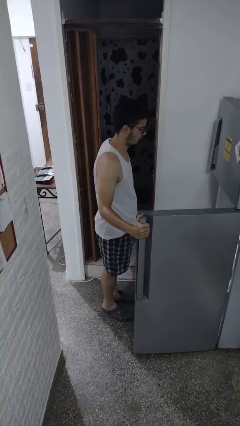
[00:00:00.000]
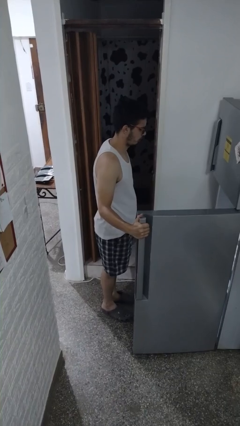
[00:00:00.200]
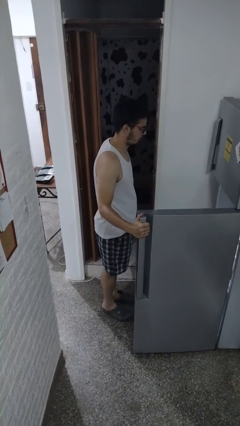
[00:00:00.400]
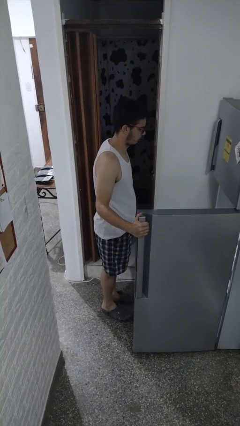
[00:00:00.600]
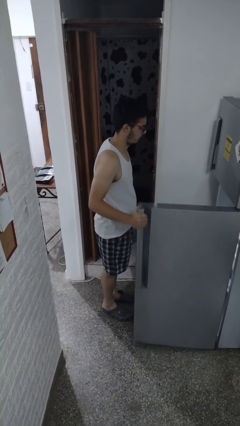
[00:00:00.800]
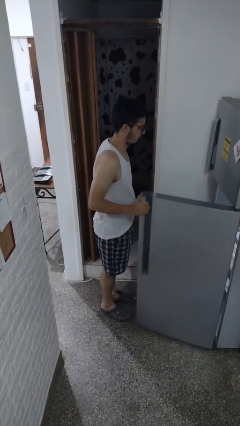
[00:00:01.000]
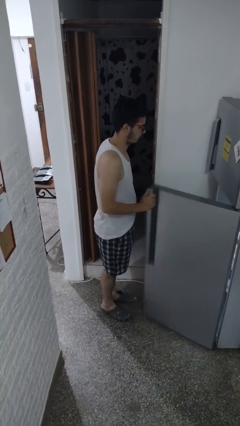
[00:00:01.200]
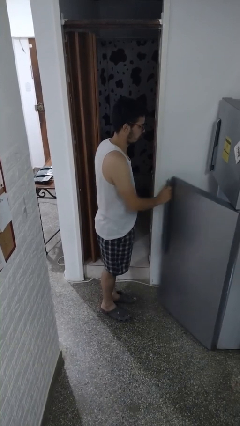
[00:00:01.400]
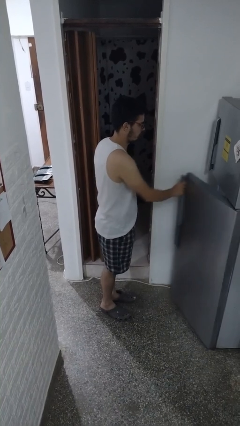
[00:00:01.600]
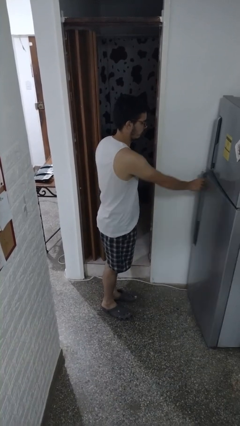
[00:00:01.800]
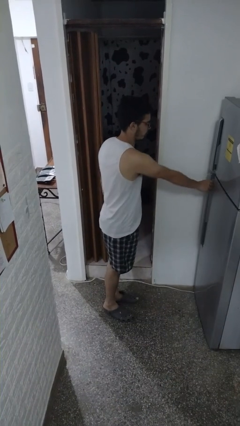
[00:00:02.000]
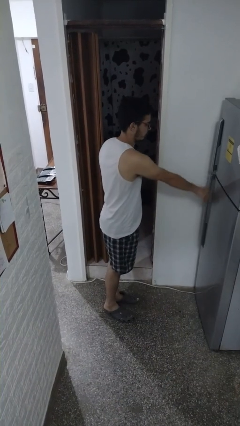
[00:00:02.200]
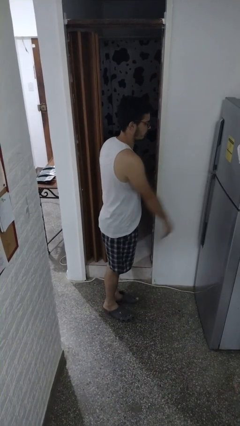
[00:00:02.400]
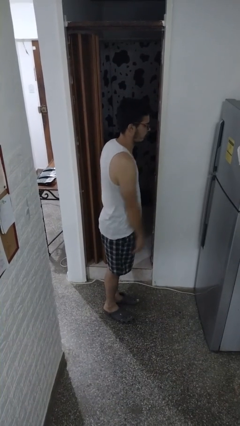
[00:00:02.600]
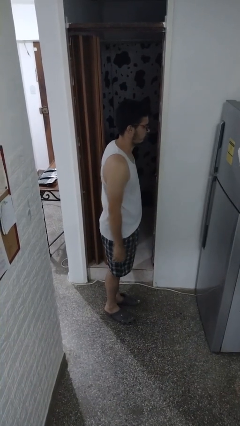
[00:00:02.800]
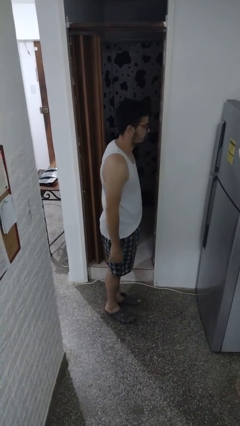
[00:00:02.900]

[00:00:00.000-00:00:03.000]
person closes refrigerator

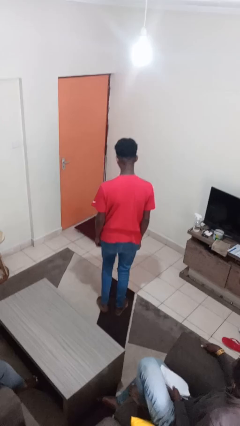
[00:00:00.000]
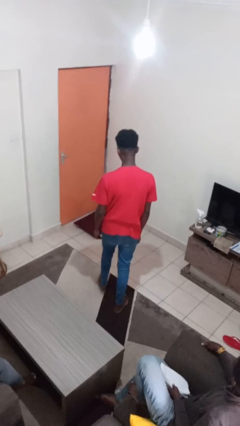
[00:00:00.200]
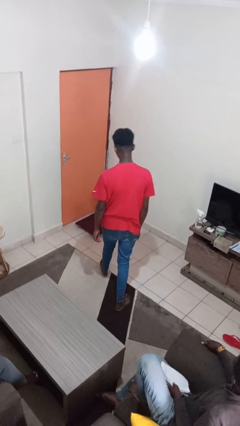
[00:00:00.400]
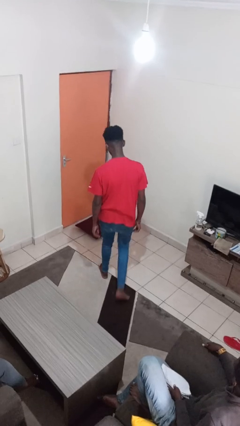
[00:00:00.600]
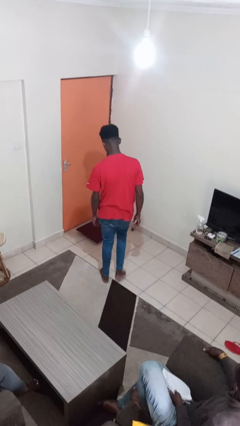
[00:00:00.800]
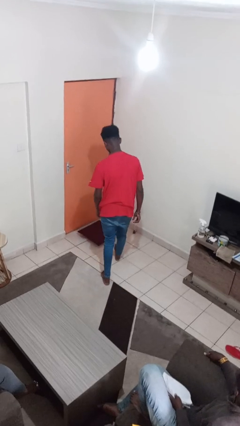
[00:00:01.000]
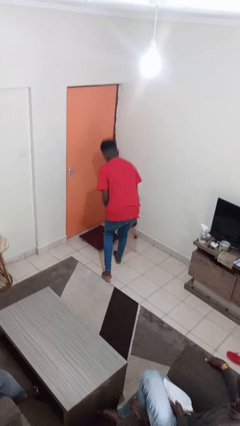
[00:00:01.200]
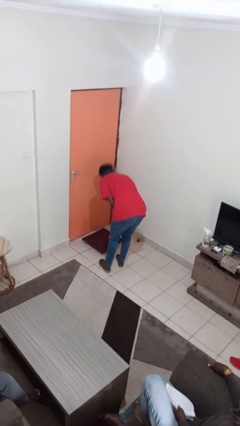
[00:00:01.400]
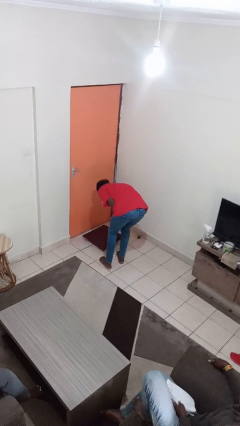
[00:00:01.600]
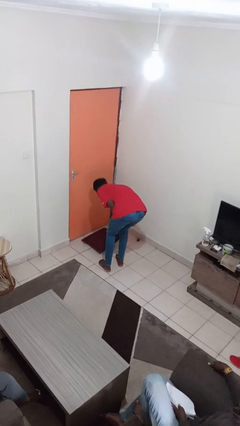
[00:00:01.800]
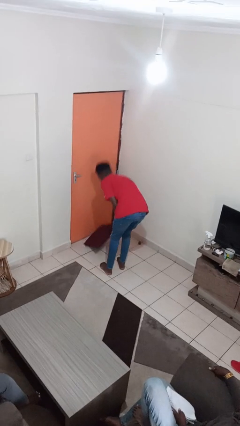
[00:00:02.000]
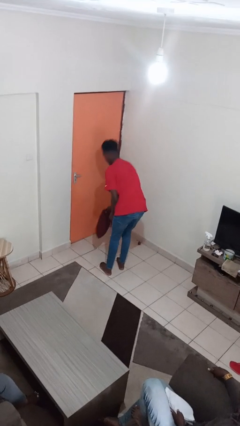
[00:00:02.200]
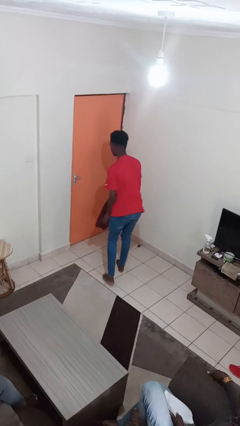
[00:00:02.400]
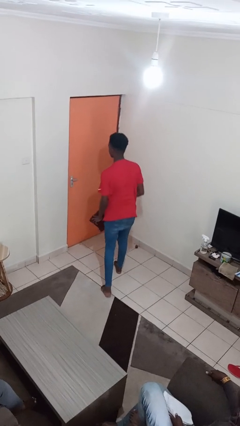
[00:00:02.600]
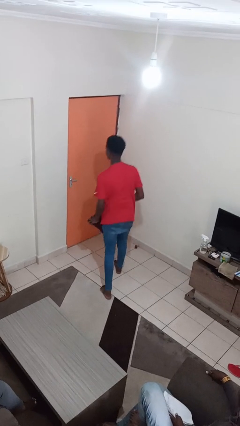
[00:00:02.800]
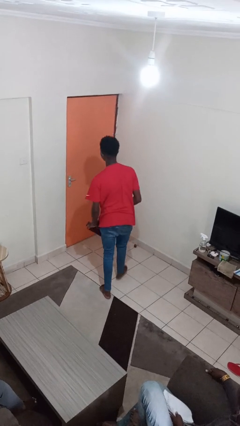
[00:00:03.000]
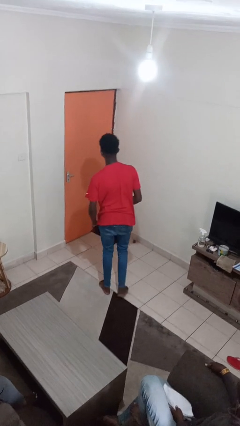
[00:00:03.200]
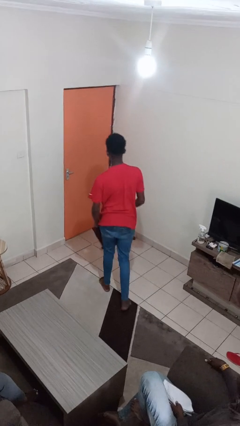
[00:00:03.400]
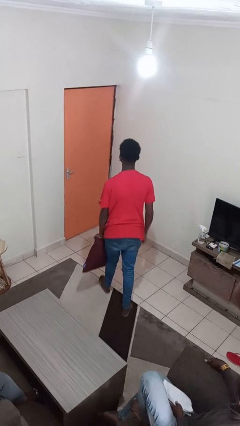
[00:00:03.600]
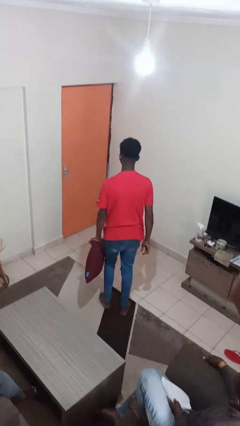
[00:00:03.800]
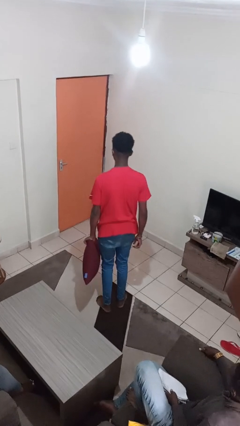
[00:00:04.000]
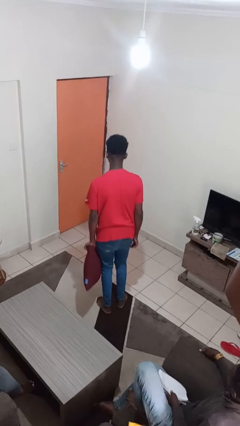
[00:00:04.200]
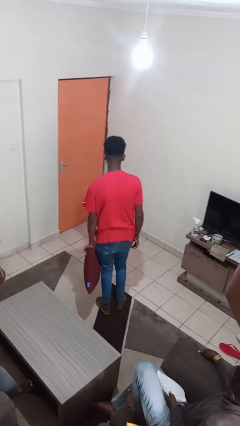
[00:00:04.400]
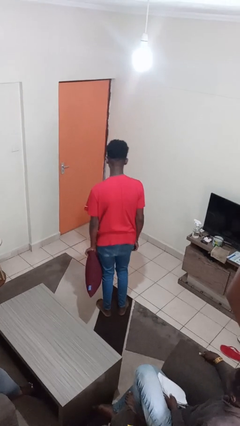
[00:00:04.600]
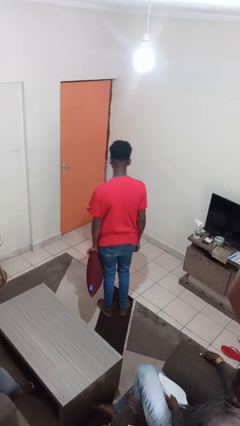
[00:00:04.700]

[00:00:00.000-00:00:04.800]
person picks up object from floor

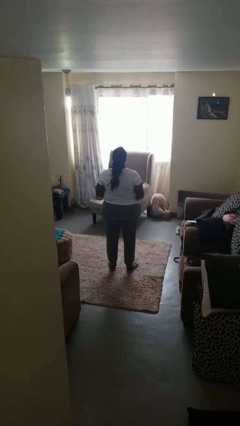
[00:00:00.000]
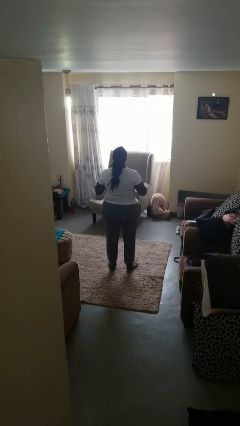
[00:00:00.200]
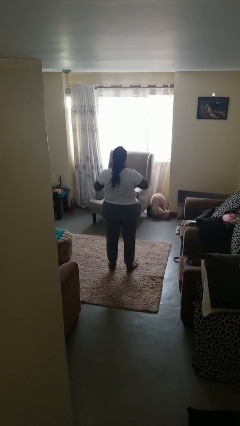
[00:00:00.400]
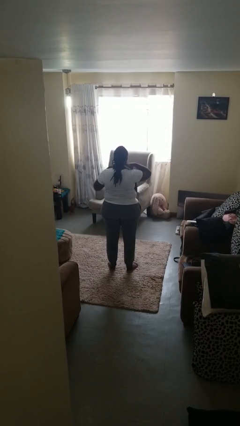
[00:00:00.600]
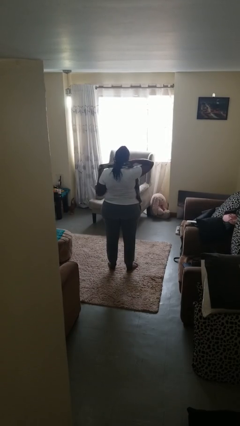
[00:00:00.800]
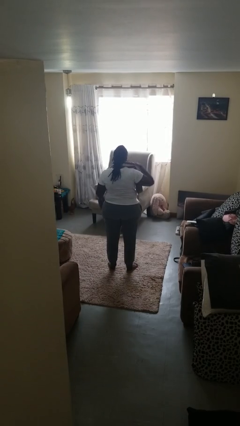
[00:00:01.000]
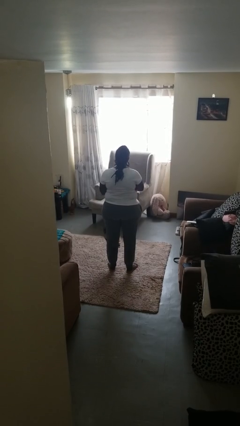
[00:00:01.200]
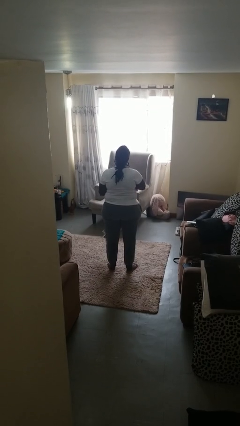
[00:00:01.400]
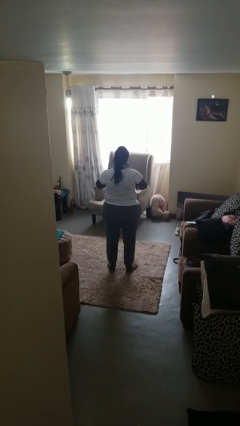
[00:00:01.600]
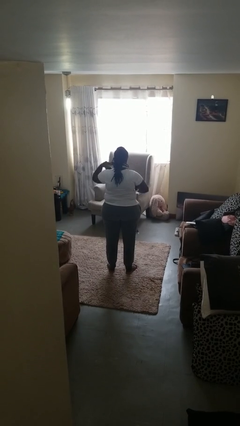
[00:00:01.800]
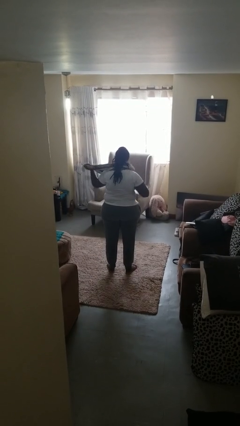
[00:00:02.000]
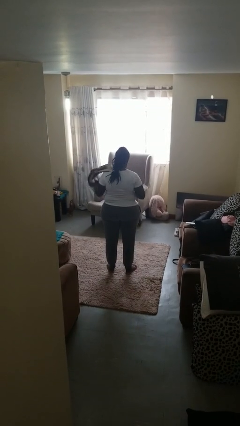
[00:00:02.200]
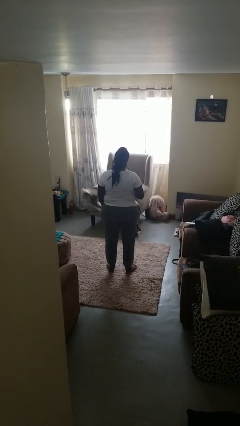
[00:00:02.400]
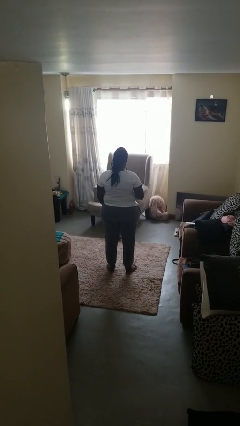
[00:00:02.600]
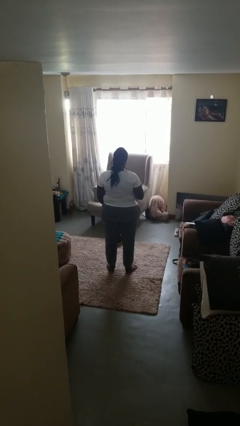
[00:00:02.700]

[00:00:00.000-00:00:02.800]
person takes off scarf

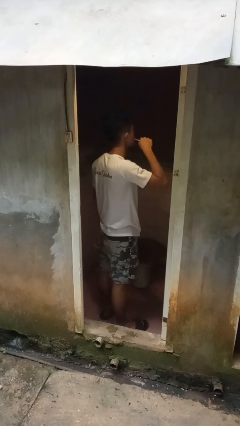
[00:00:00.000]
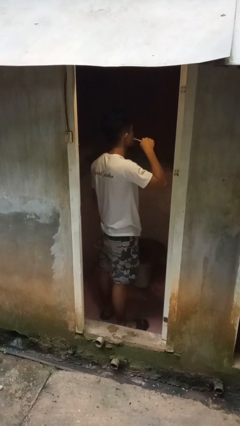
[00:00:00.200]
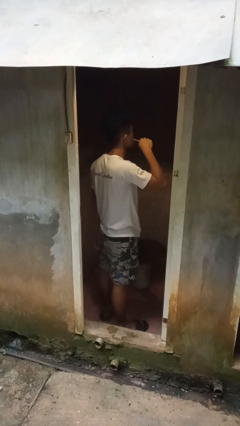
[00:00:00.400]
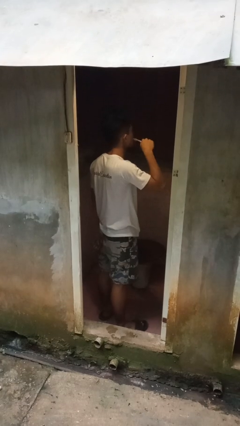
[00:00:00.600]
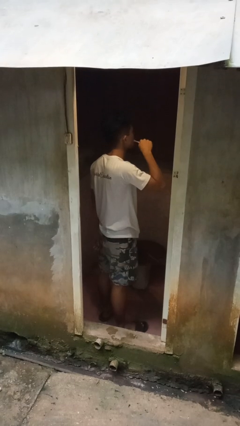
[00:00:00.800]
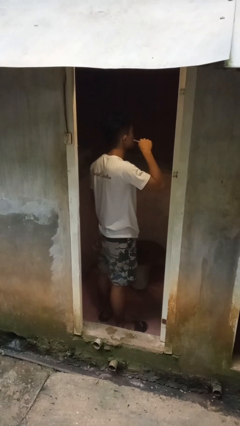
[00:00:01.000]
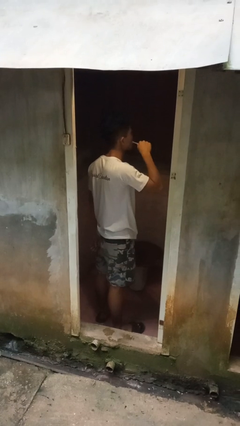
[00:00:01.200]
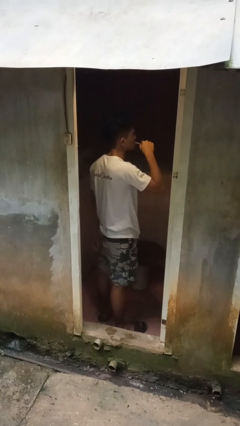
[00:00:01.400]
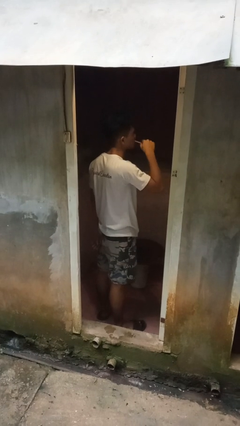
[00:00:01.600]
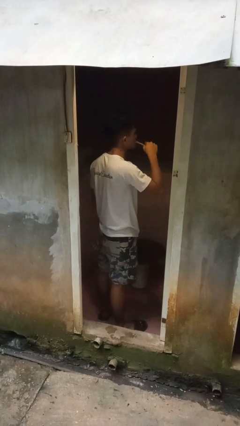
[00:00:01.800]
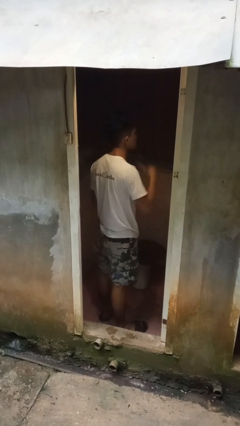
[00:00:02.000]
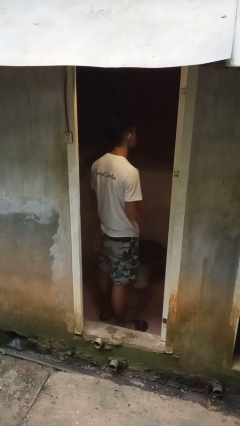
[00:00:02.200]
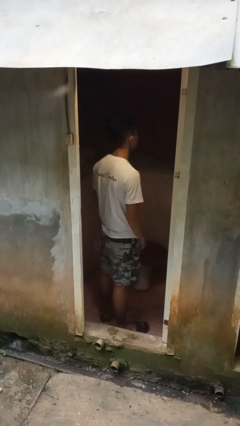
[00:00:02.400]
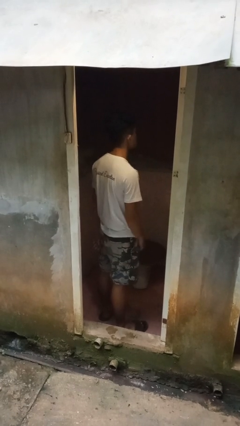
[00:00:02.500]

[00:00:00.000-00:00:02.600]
person brushes teeth

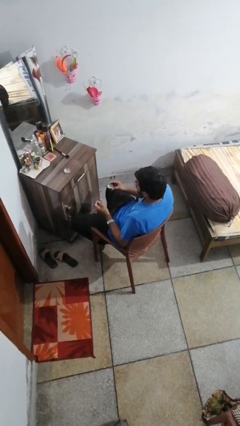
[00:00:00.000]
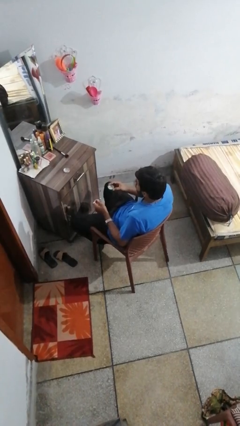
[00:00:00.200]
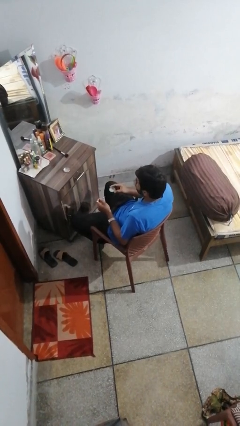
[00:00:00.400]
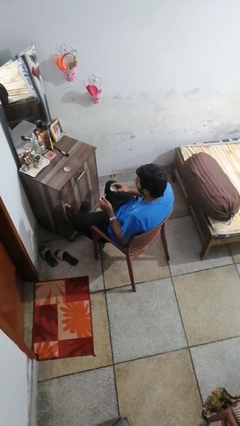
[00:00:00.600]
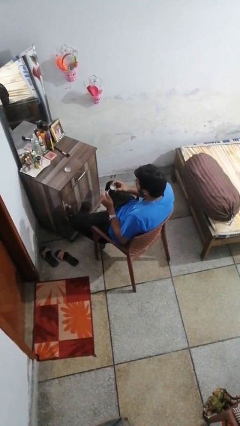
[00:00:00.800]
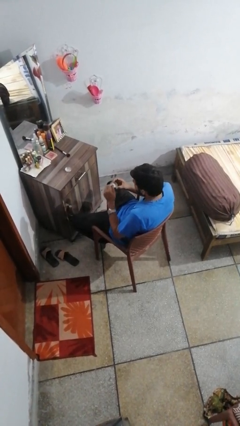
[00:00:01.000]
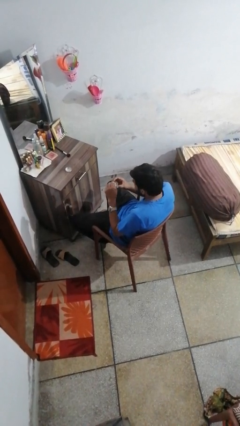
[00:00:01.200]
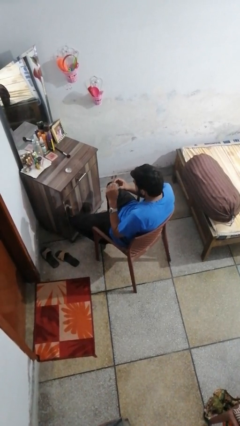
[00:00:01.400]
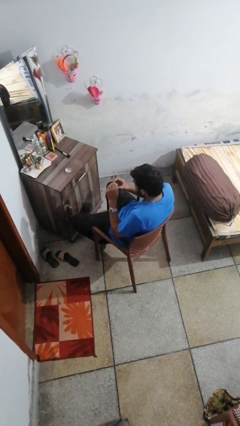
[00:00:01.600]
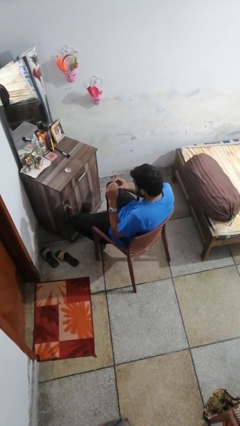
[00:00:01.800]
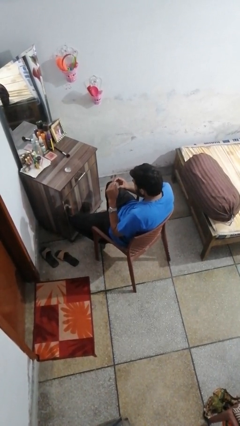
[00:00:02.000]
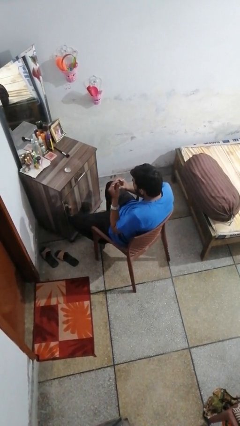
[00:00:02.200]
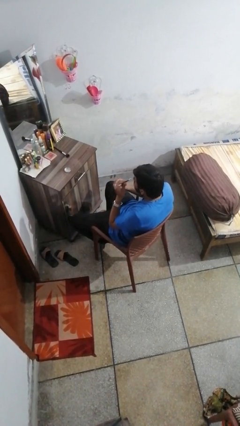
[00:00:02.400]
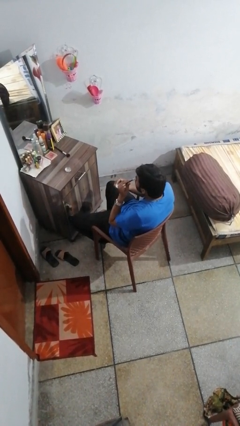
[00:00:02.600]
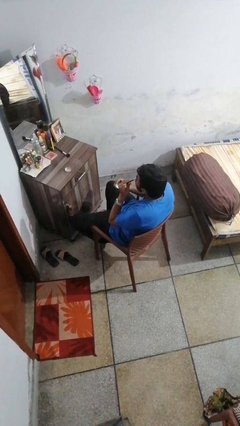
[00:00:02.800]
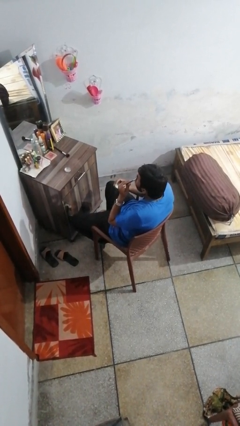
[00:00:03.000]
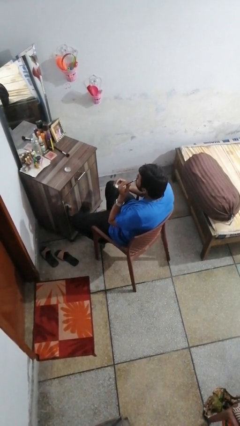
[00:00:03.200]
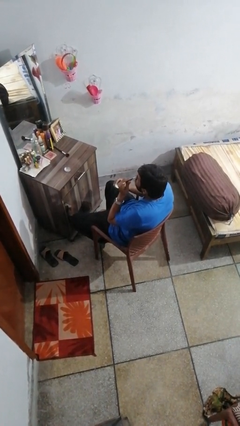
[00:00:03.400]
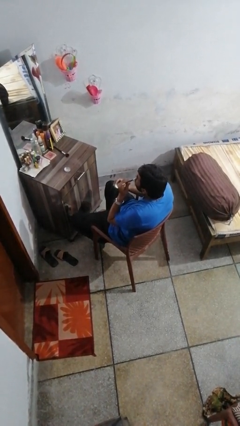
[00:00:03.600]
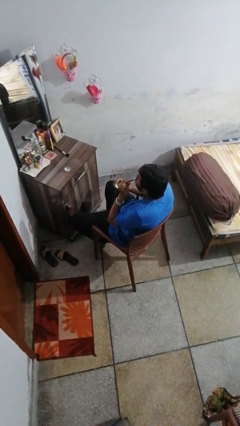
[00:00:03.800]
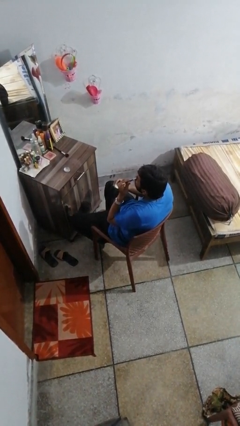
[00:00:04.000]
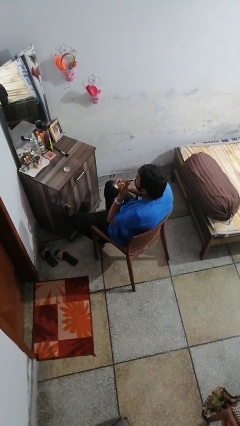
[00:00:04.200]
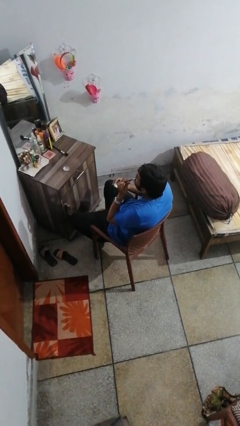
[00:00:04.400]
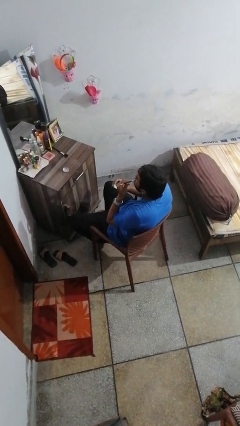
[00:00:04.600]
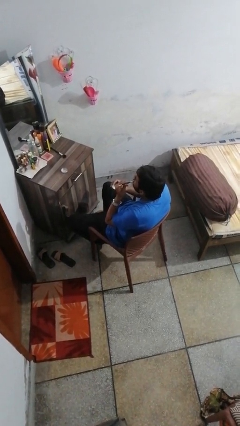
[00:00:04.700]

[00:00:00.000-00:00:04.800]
person applies eye makeup
